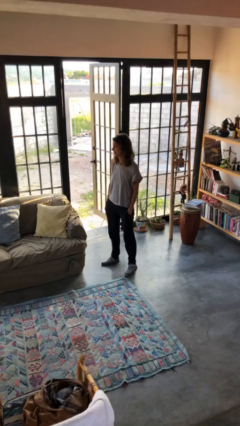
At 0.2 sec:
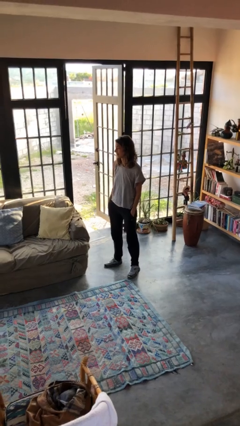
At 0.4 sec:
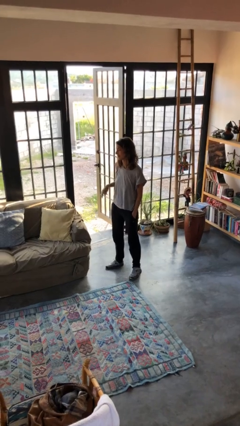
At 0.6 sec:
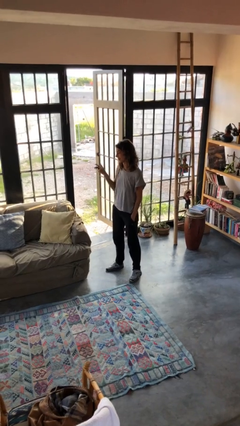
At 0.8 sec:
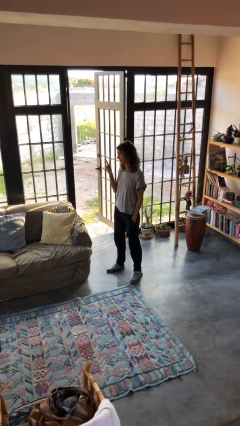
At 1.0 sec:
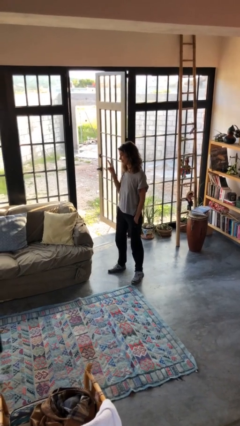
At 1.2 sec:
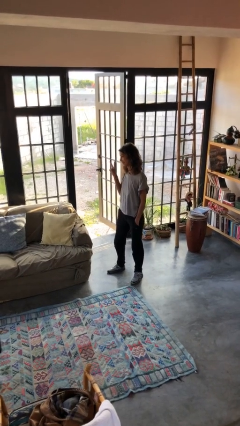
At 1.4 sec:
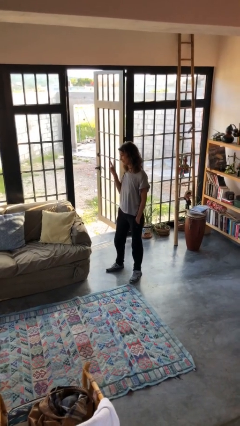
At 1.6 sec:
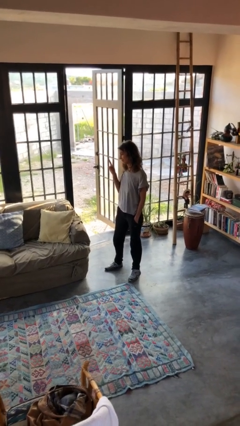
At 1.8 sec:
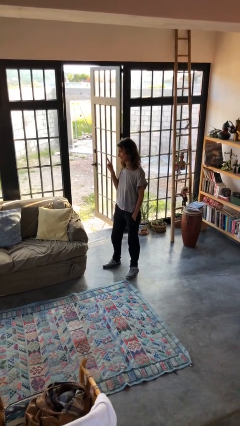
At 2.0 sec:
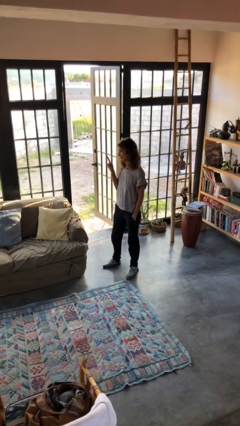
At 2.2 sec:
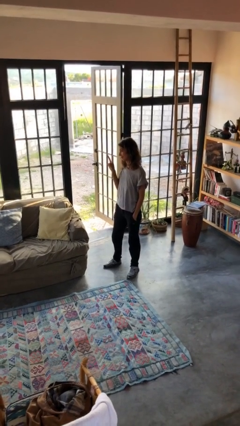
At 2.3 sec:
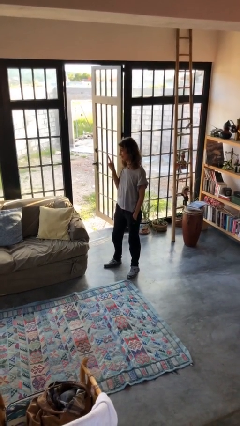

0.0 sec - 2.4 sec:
person gestures peace

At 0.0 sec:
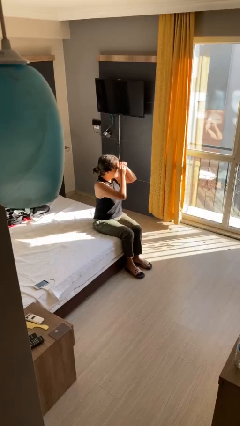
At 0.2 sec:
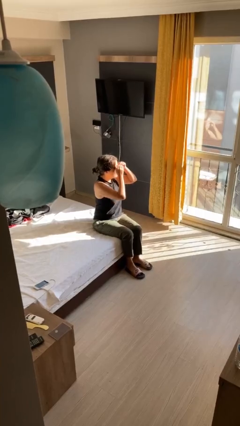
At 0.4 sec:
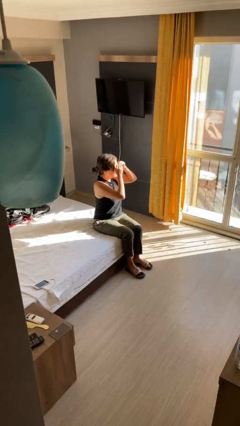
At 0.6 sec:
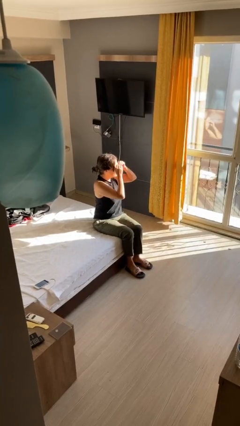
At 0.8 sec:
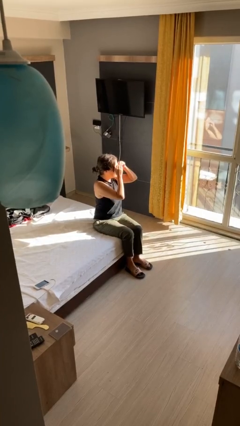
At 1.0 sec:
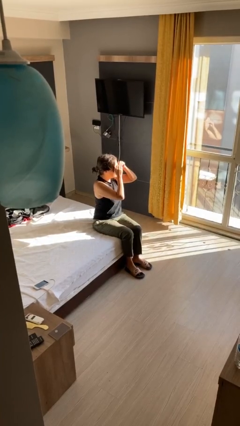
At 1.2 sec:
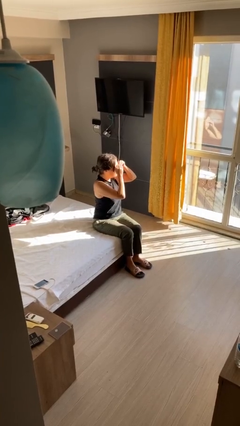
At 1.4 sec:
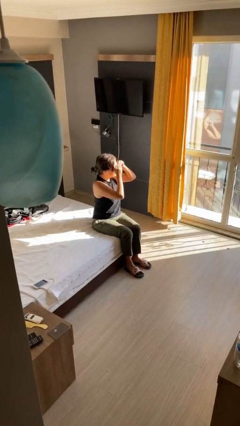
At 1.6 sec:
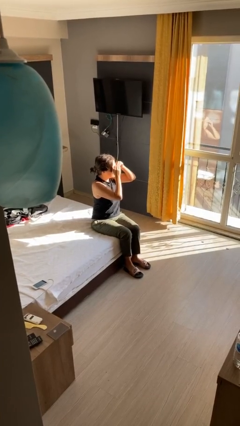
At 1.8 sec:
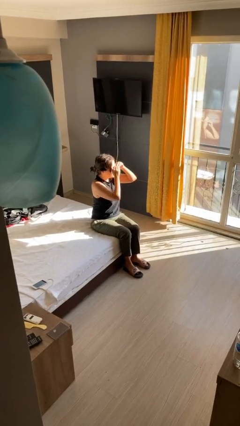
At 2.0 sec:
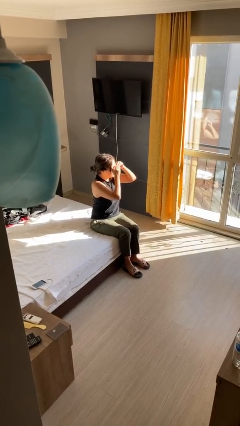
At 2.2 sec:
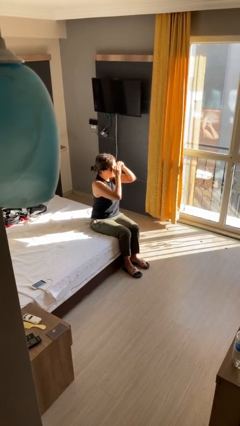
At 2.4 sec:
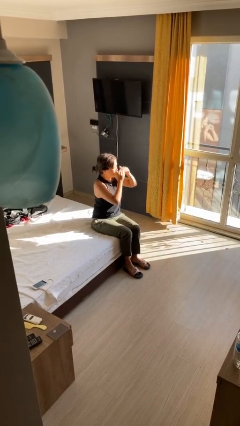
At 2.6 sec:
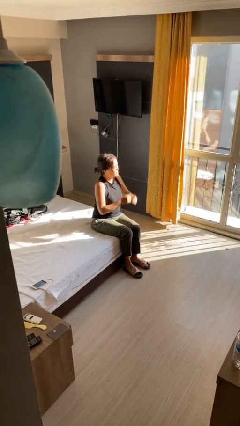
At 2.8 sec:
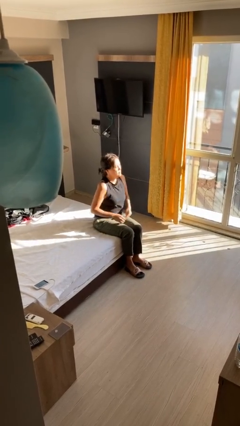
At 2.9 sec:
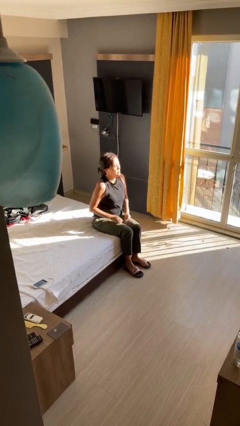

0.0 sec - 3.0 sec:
person shades eyes

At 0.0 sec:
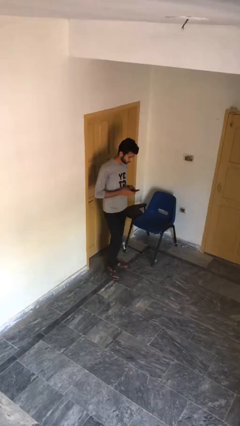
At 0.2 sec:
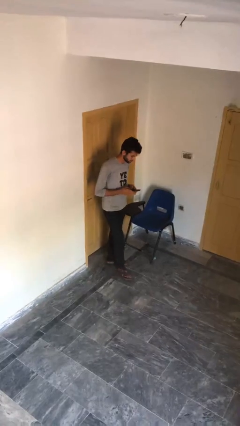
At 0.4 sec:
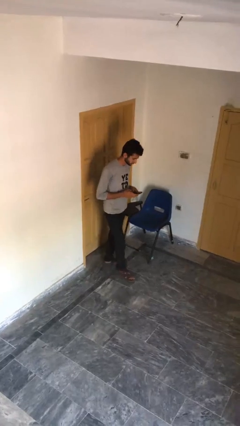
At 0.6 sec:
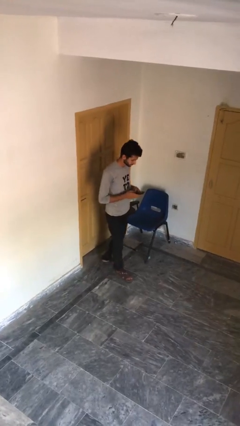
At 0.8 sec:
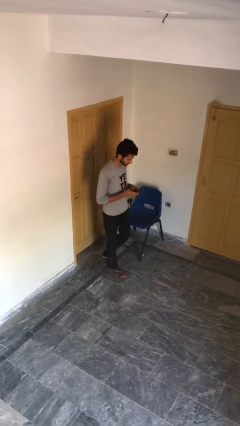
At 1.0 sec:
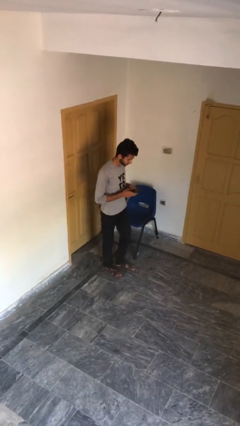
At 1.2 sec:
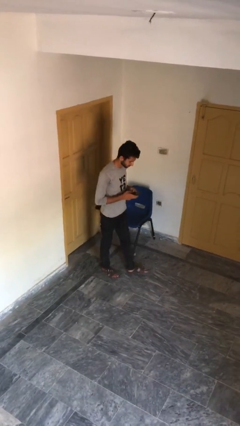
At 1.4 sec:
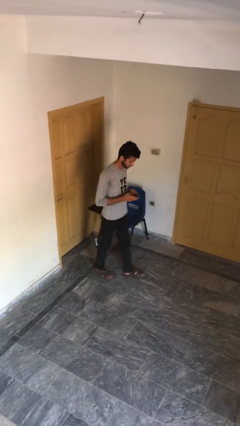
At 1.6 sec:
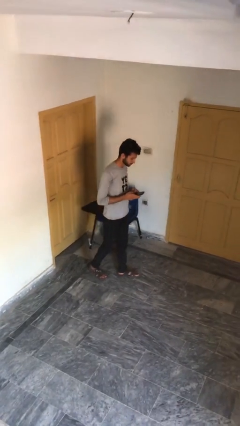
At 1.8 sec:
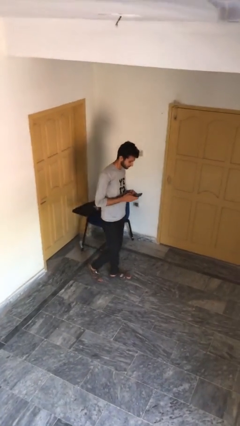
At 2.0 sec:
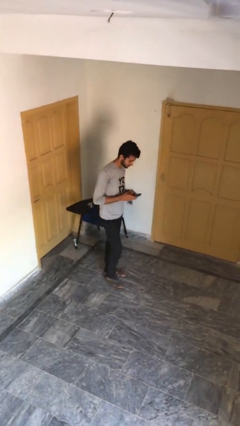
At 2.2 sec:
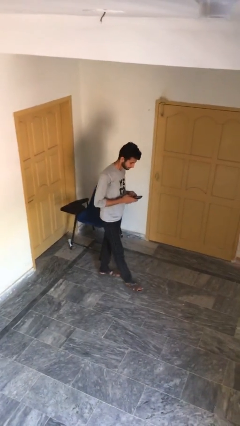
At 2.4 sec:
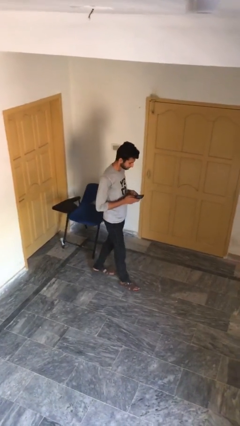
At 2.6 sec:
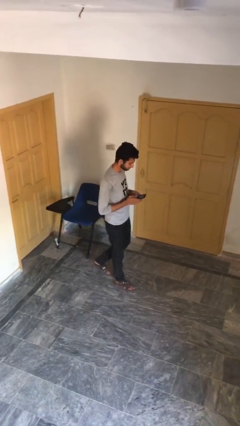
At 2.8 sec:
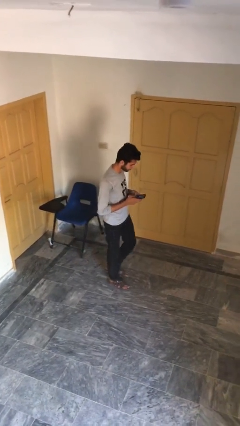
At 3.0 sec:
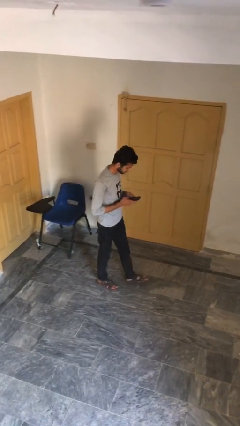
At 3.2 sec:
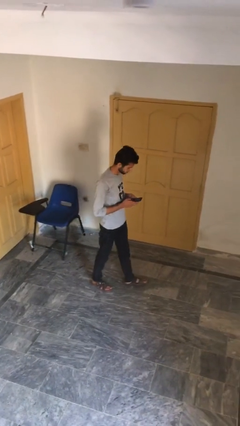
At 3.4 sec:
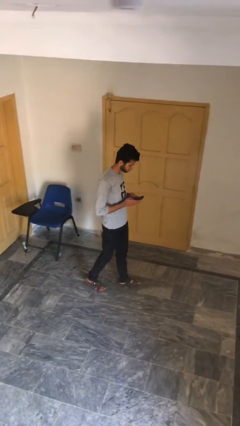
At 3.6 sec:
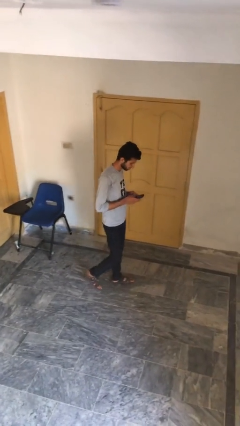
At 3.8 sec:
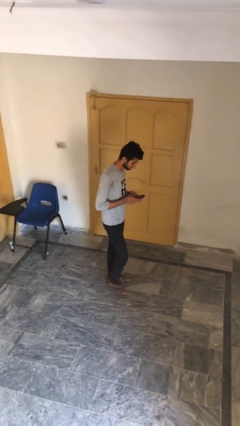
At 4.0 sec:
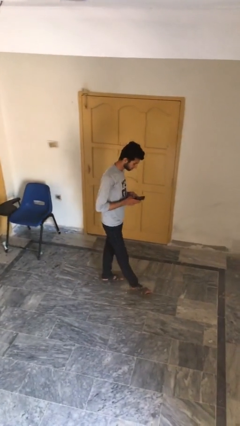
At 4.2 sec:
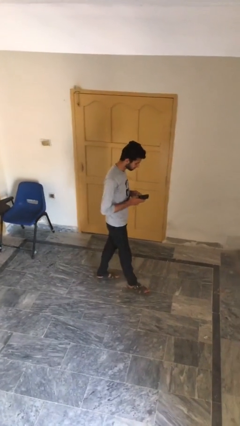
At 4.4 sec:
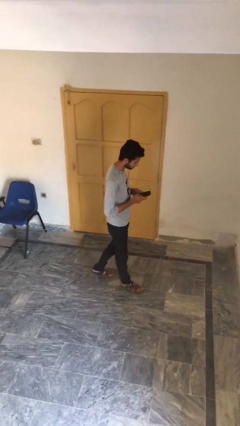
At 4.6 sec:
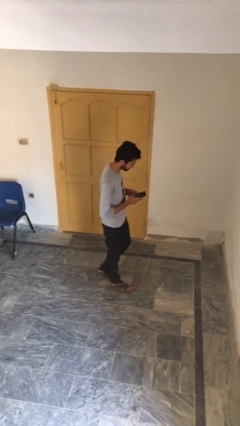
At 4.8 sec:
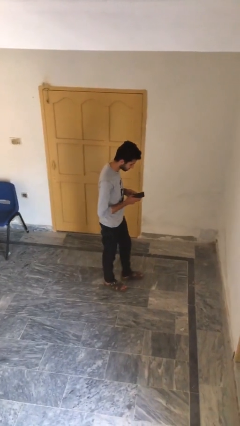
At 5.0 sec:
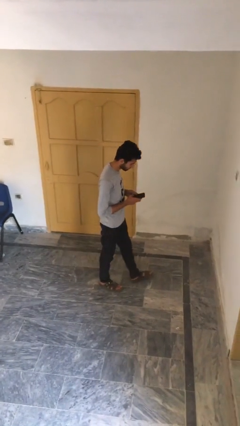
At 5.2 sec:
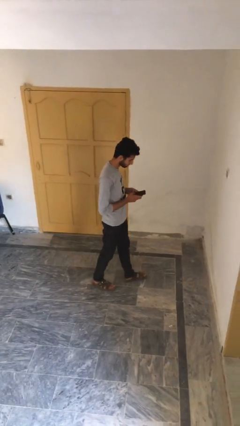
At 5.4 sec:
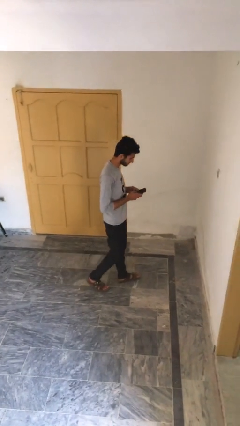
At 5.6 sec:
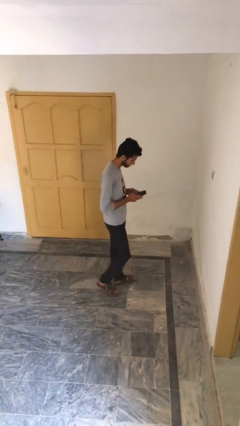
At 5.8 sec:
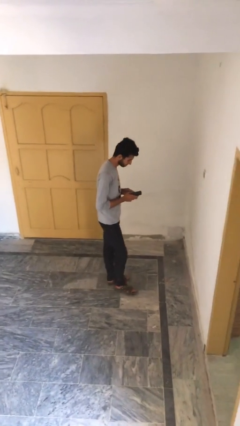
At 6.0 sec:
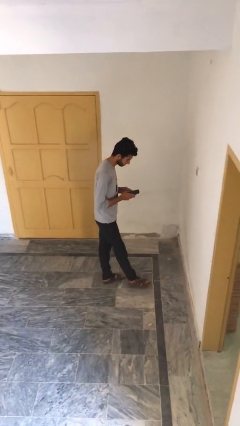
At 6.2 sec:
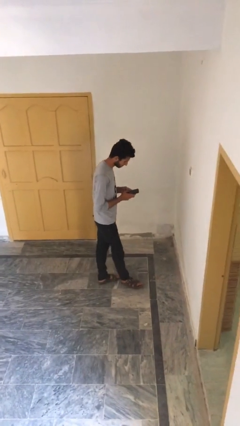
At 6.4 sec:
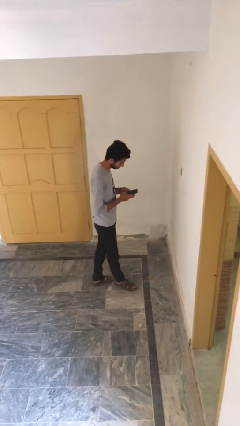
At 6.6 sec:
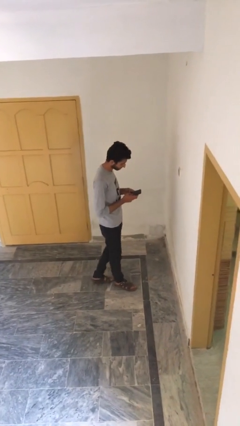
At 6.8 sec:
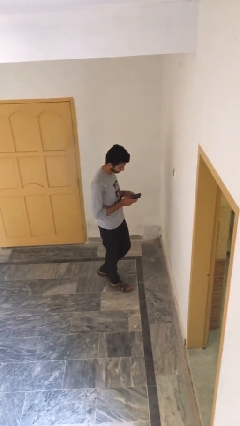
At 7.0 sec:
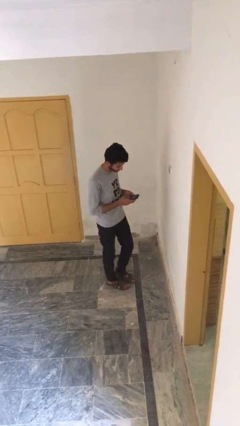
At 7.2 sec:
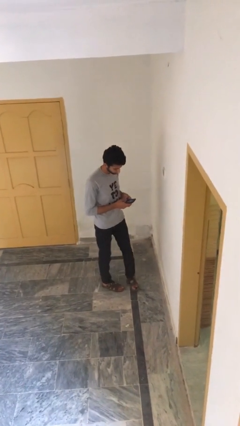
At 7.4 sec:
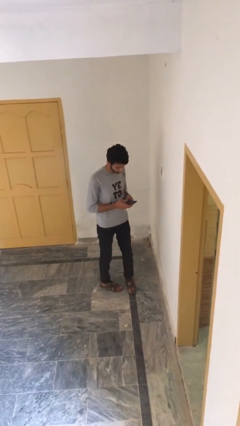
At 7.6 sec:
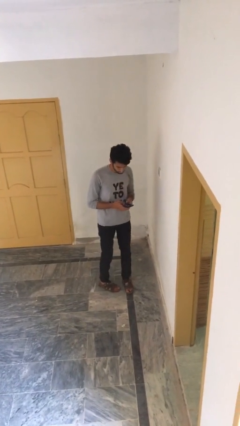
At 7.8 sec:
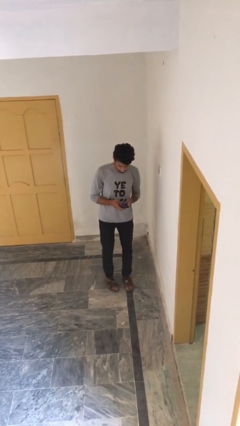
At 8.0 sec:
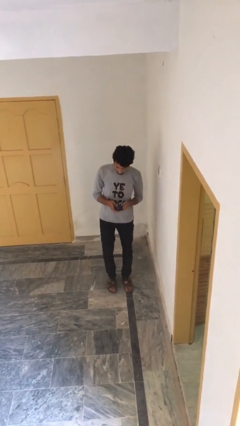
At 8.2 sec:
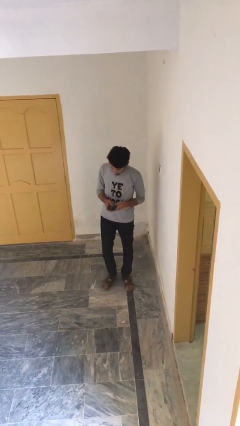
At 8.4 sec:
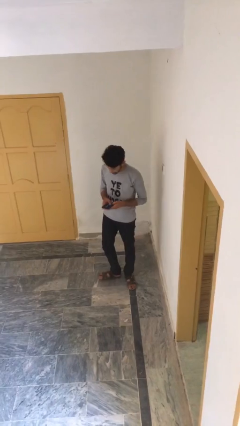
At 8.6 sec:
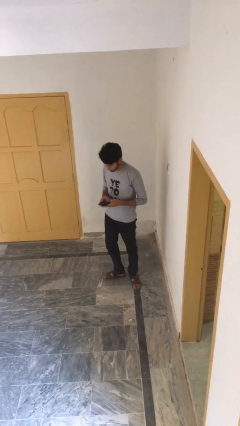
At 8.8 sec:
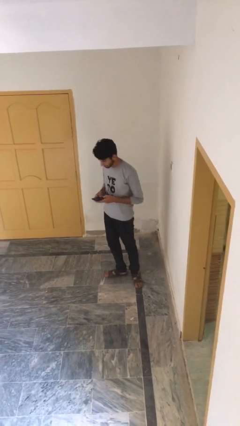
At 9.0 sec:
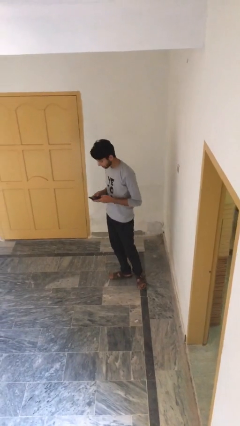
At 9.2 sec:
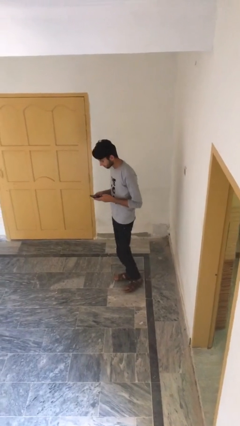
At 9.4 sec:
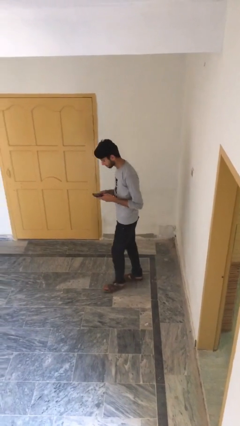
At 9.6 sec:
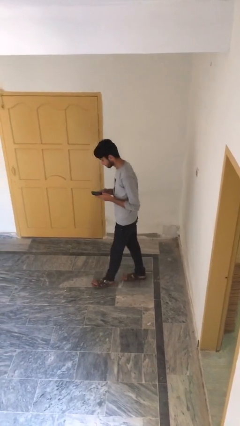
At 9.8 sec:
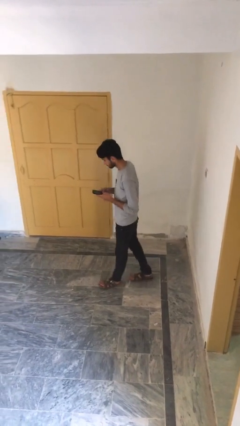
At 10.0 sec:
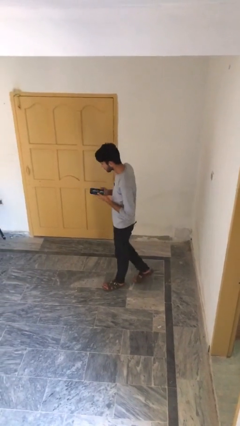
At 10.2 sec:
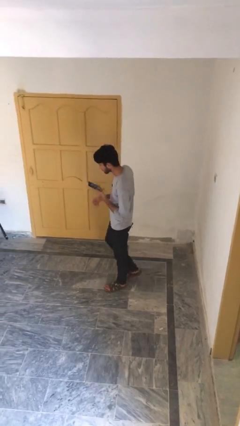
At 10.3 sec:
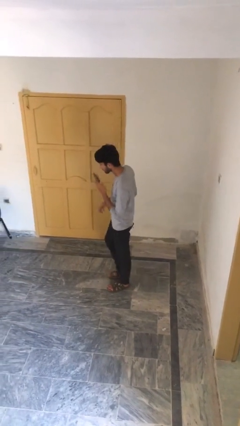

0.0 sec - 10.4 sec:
person texts on phone

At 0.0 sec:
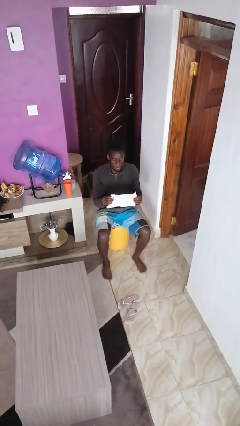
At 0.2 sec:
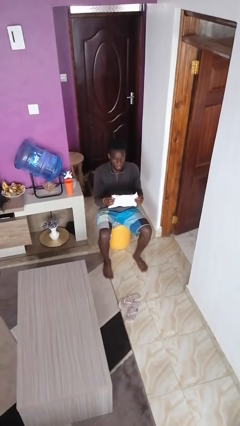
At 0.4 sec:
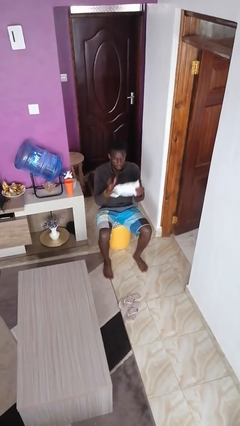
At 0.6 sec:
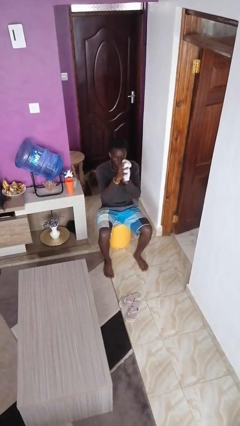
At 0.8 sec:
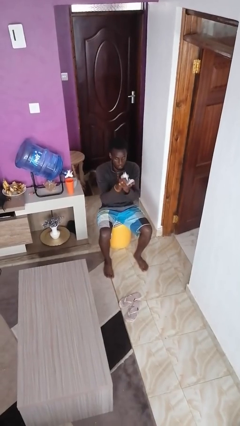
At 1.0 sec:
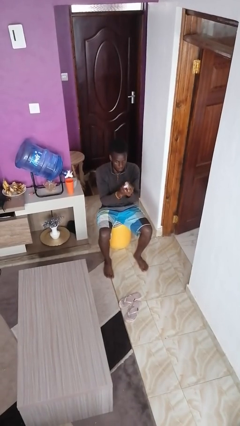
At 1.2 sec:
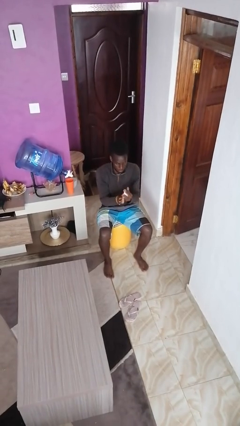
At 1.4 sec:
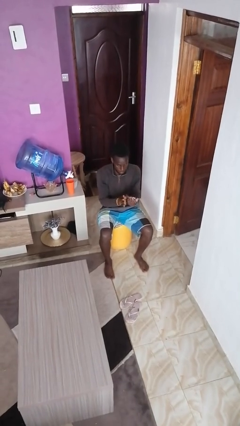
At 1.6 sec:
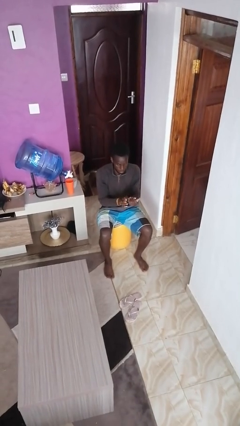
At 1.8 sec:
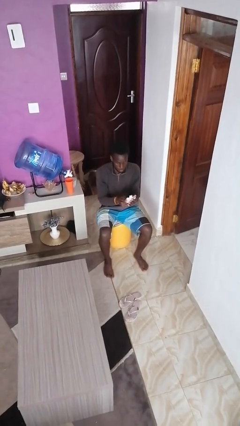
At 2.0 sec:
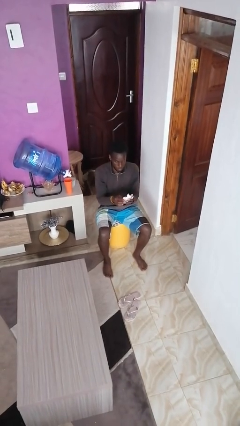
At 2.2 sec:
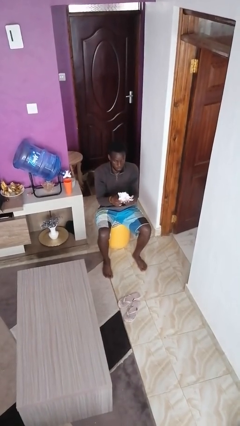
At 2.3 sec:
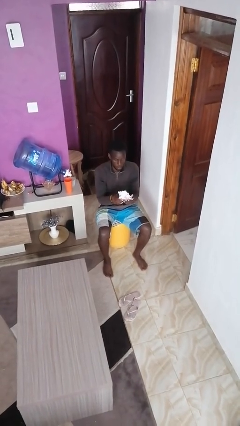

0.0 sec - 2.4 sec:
person crumples paper
